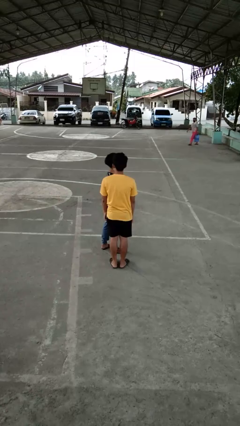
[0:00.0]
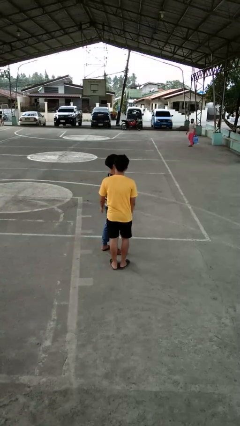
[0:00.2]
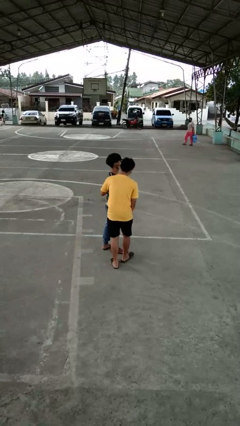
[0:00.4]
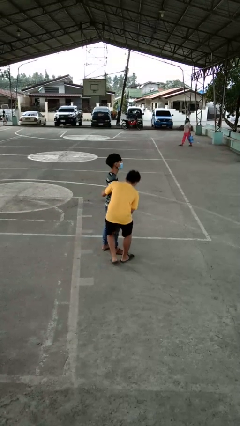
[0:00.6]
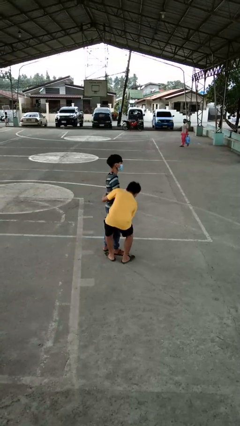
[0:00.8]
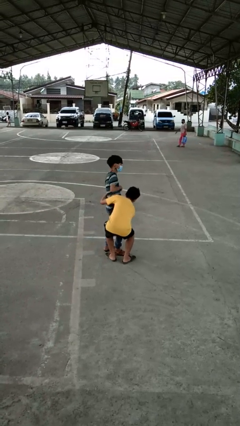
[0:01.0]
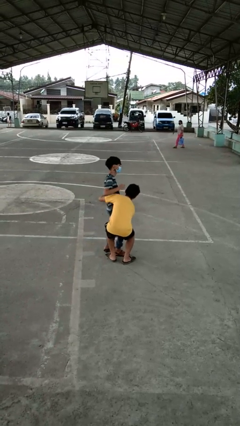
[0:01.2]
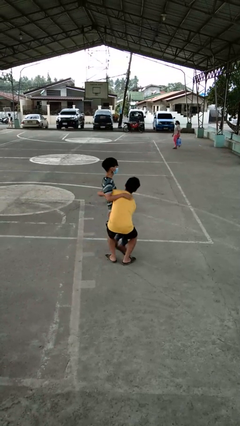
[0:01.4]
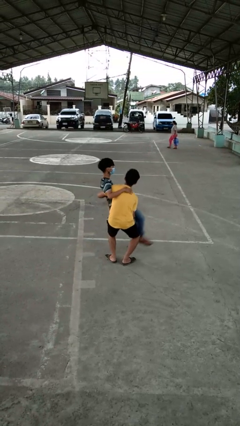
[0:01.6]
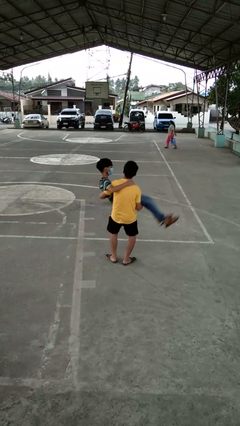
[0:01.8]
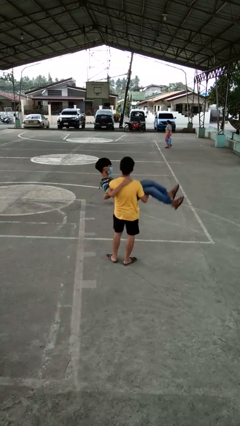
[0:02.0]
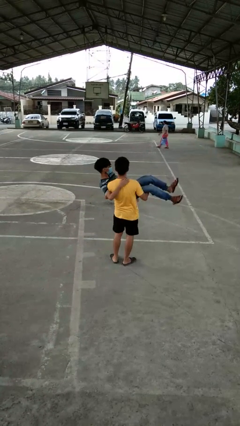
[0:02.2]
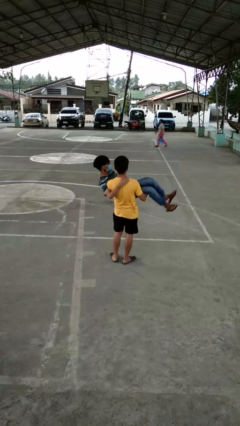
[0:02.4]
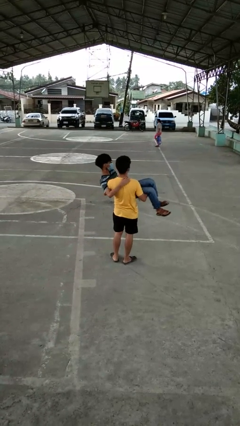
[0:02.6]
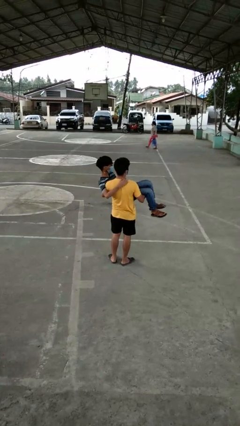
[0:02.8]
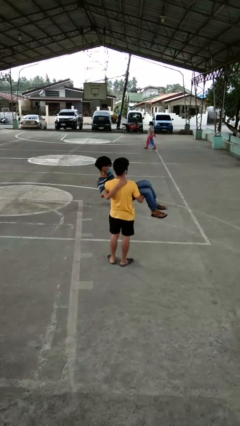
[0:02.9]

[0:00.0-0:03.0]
person picks up person

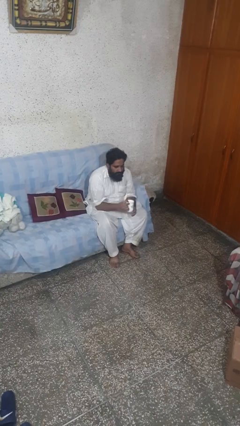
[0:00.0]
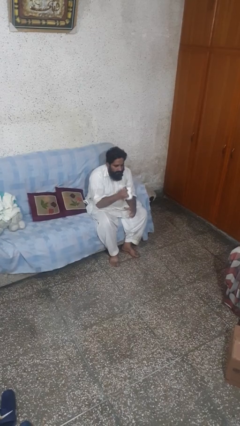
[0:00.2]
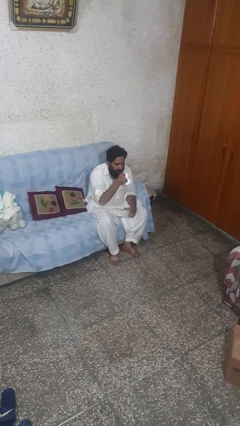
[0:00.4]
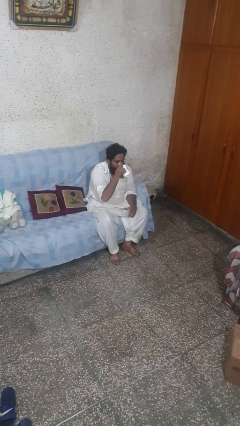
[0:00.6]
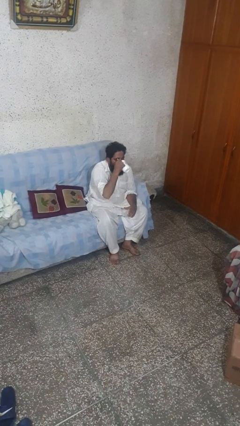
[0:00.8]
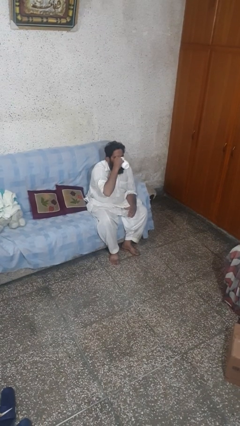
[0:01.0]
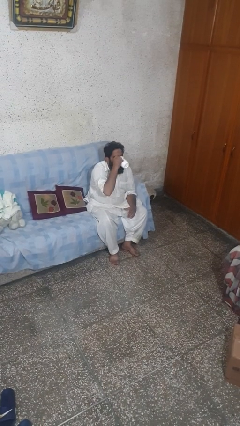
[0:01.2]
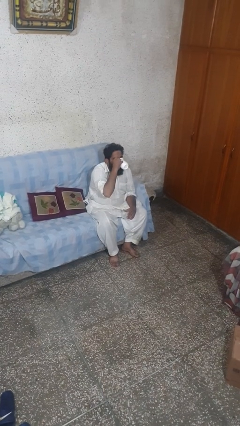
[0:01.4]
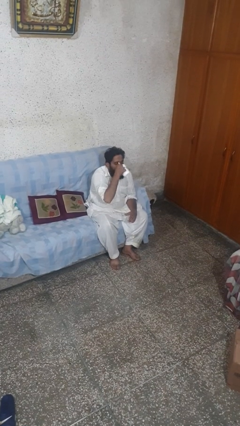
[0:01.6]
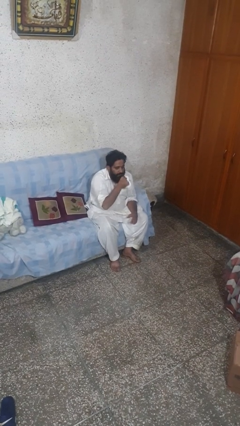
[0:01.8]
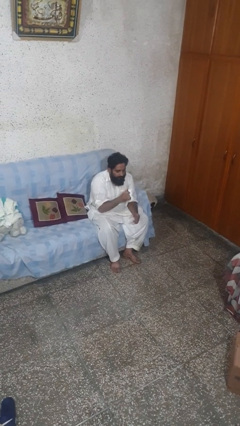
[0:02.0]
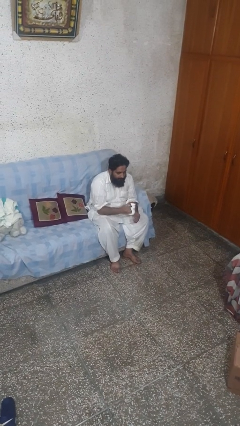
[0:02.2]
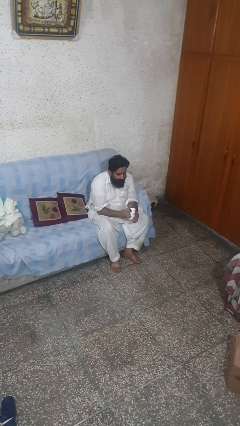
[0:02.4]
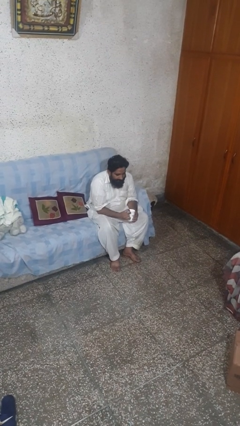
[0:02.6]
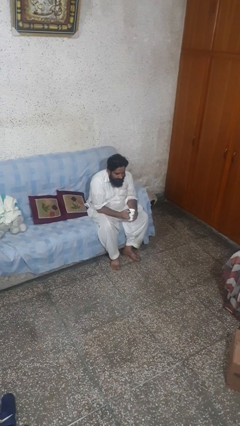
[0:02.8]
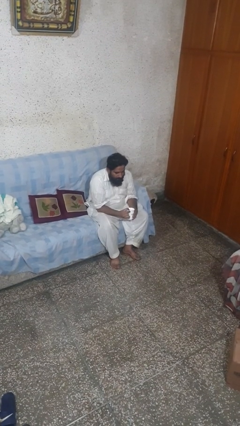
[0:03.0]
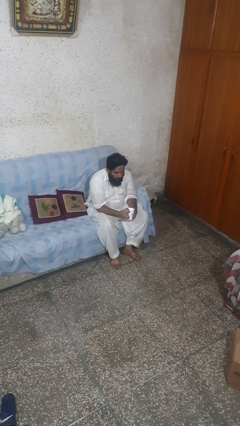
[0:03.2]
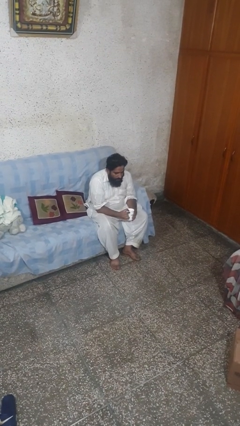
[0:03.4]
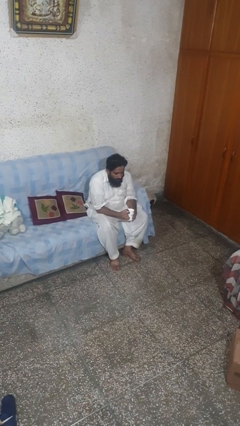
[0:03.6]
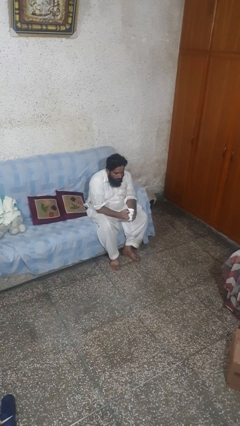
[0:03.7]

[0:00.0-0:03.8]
person drinks from mug

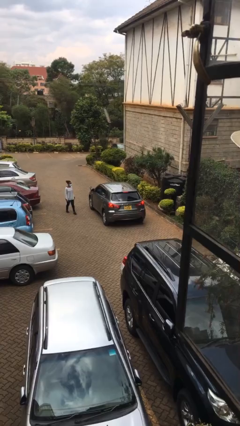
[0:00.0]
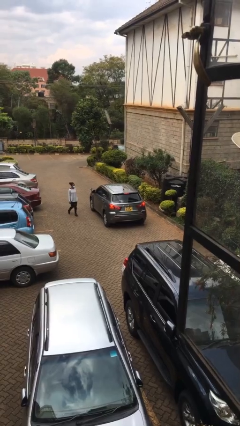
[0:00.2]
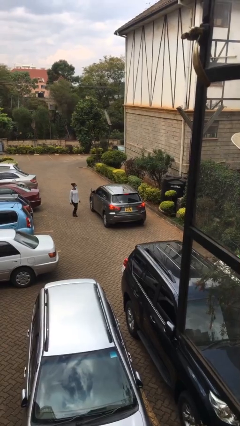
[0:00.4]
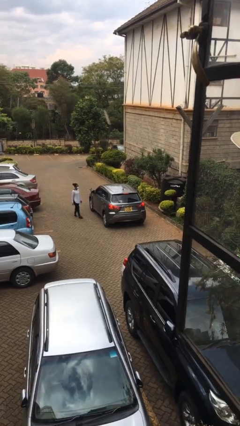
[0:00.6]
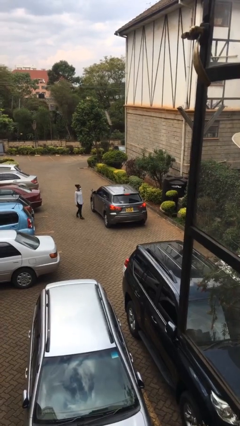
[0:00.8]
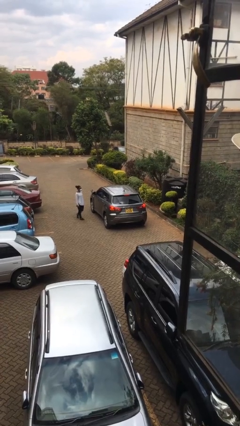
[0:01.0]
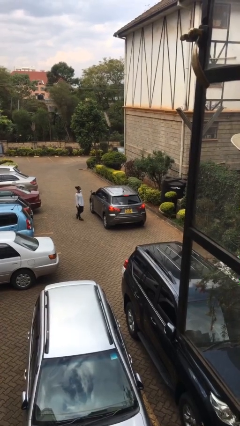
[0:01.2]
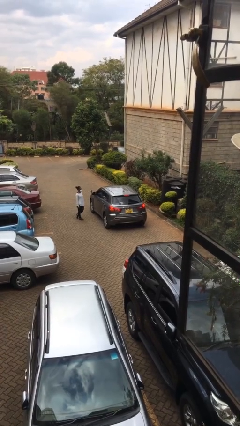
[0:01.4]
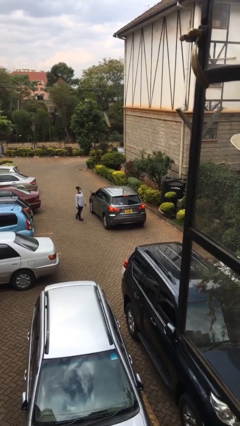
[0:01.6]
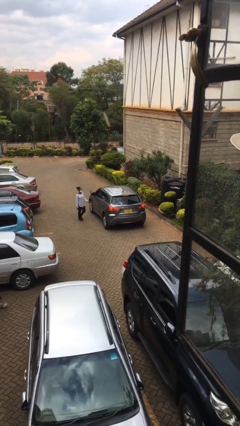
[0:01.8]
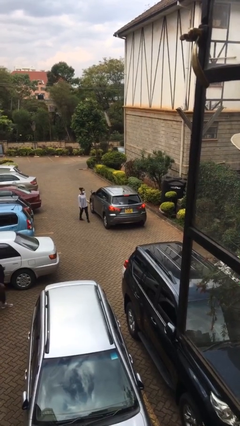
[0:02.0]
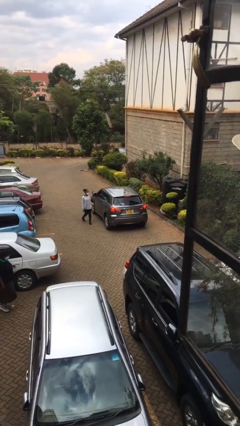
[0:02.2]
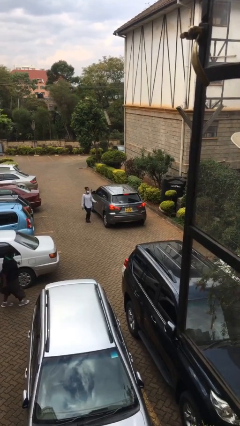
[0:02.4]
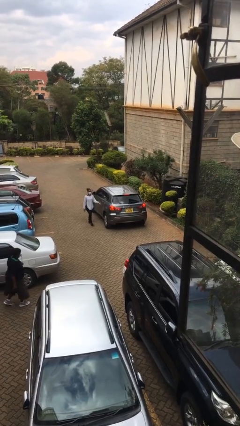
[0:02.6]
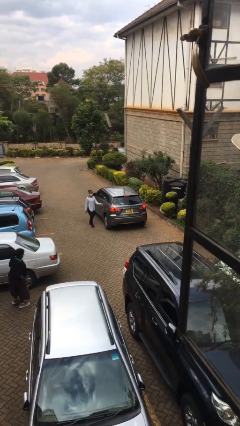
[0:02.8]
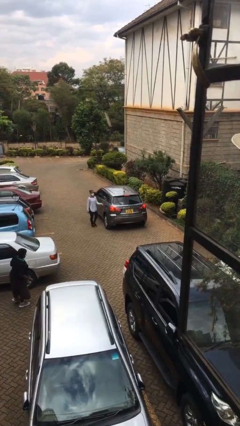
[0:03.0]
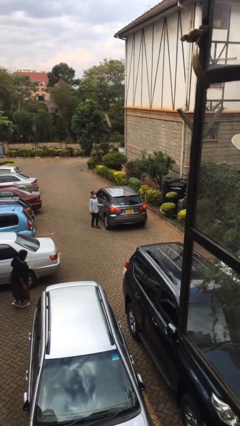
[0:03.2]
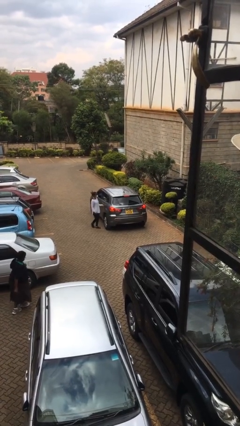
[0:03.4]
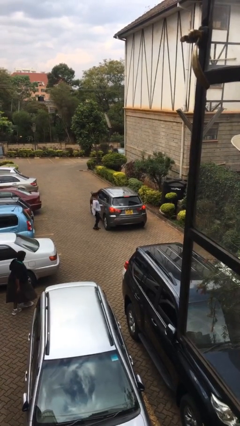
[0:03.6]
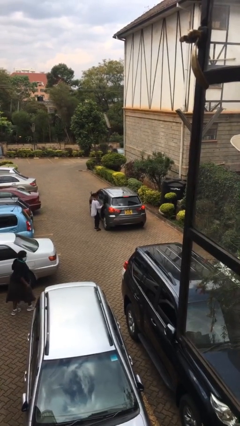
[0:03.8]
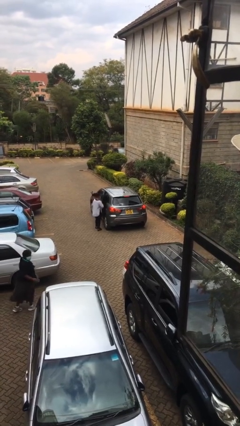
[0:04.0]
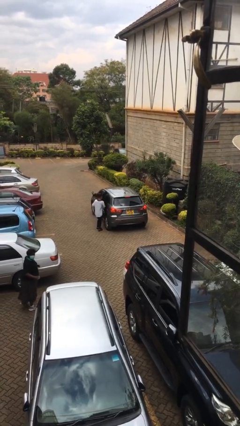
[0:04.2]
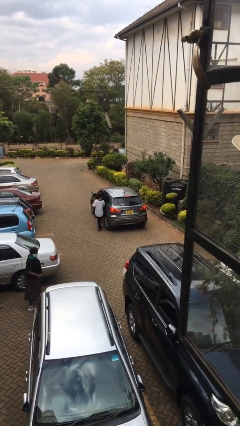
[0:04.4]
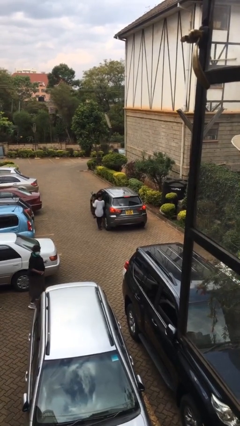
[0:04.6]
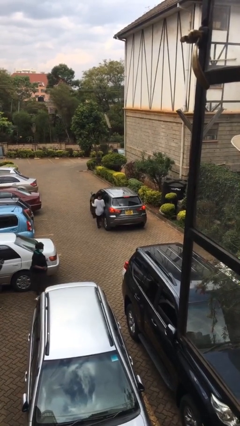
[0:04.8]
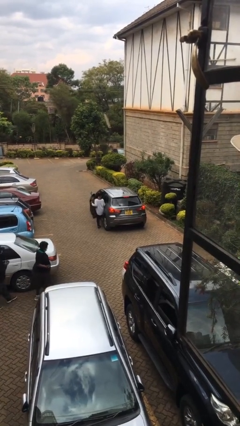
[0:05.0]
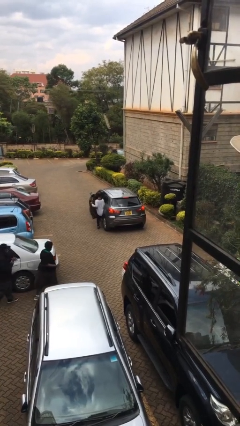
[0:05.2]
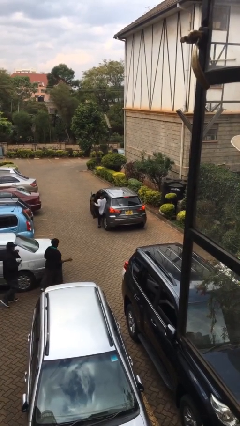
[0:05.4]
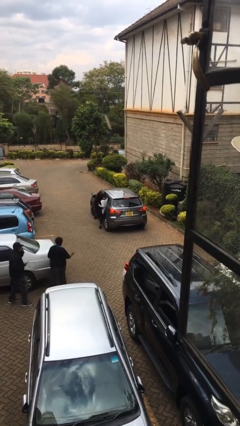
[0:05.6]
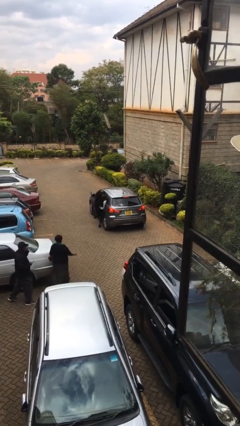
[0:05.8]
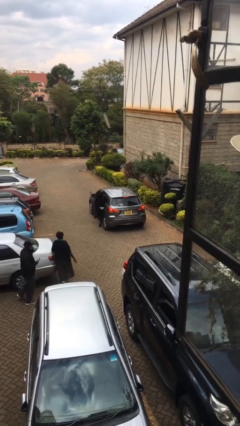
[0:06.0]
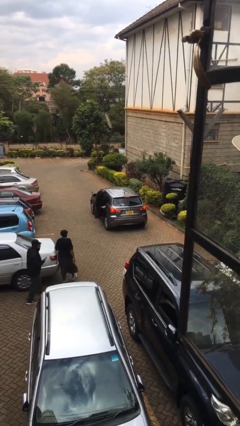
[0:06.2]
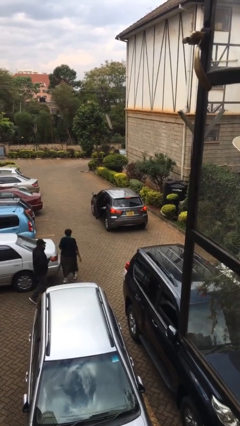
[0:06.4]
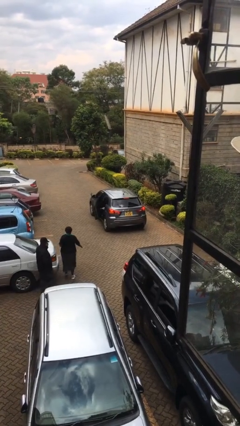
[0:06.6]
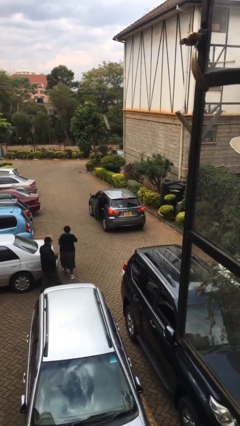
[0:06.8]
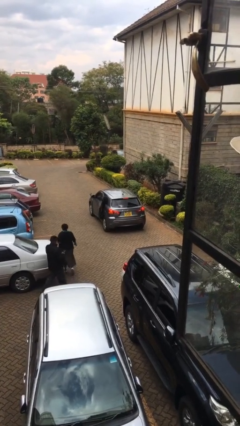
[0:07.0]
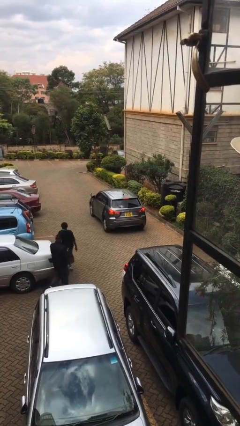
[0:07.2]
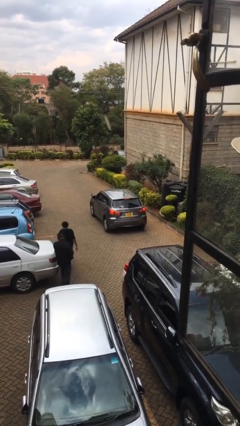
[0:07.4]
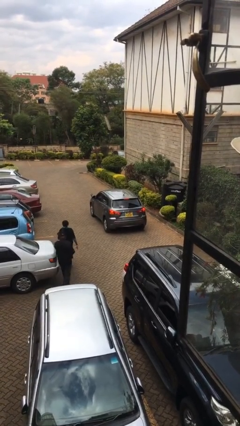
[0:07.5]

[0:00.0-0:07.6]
car picks up person

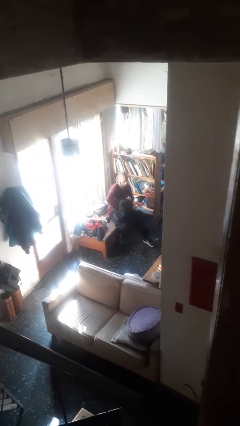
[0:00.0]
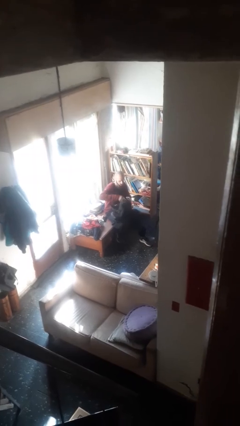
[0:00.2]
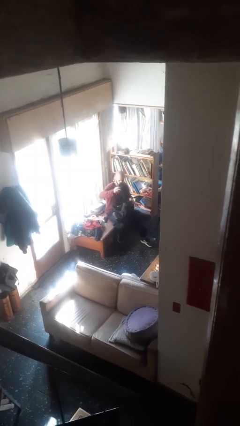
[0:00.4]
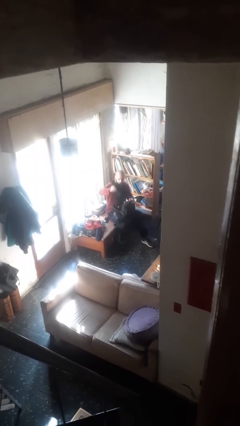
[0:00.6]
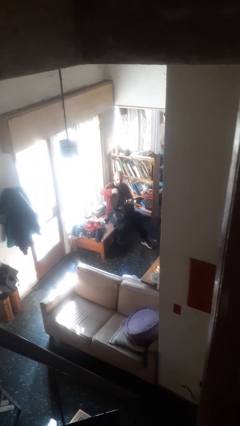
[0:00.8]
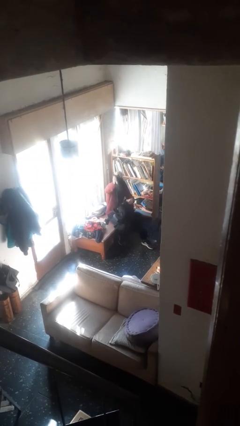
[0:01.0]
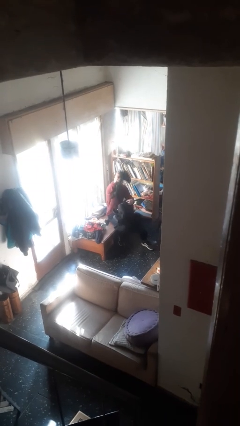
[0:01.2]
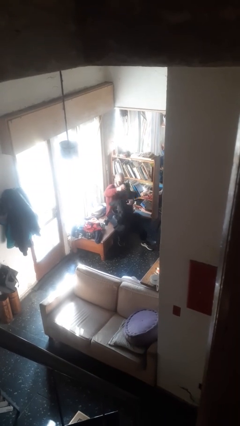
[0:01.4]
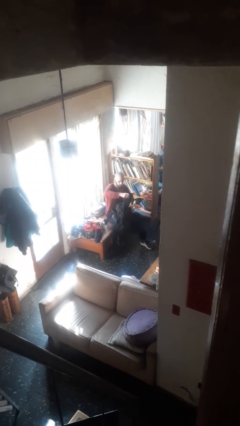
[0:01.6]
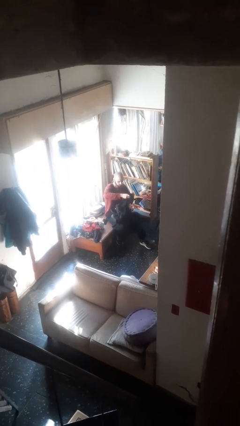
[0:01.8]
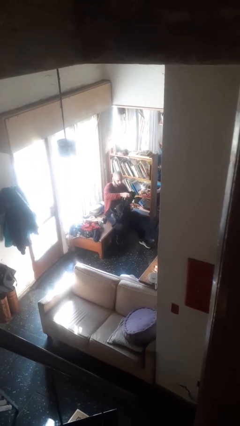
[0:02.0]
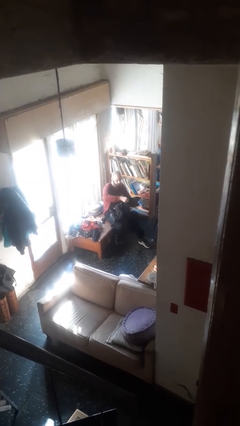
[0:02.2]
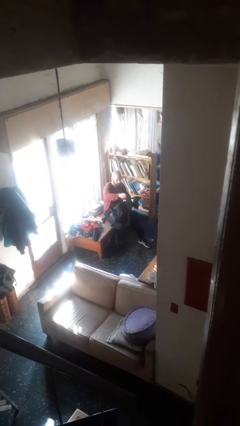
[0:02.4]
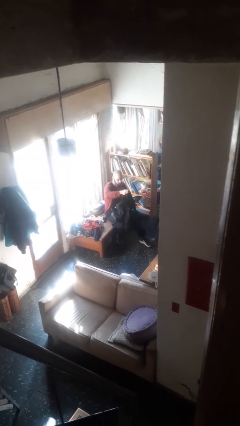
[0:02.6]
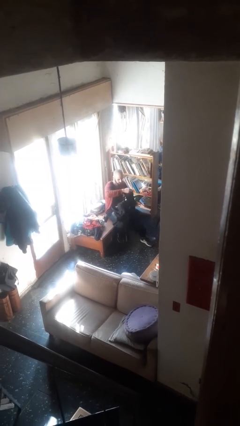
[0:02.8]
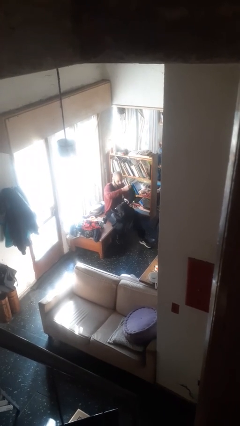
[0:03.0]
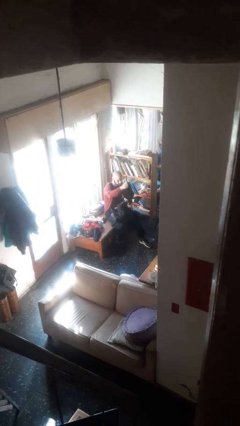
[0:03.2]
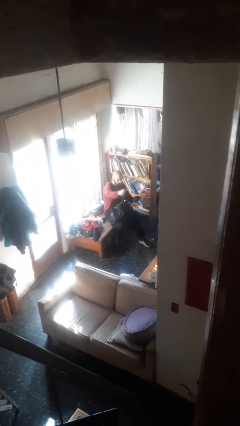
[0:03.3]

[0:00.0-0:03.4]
person takes object from backpack

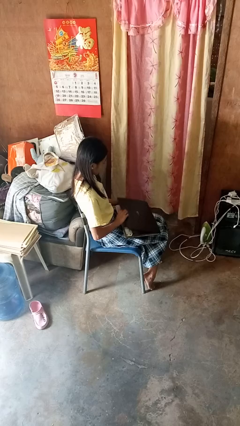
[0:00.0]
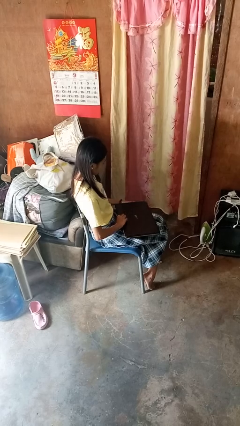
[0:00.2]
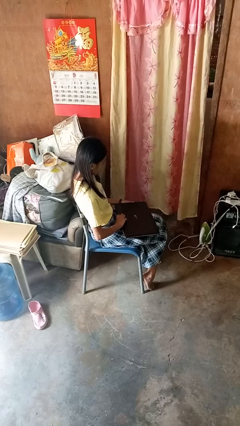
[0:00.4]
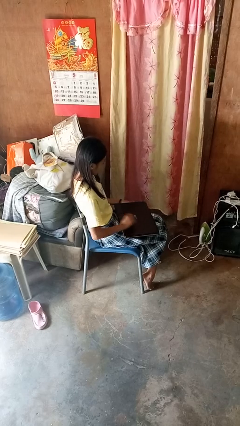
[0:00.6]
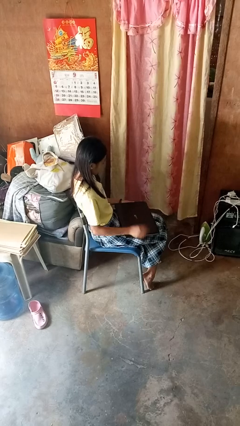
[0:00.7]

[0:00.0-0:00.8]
person closes laptop
